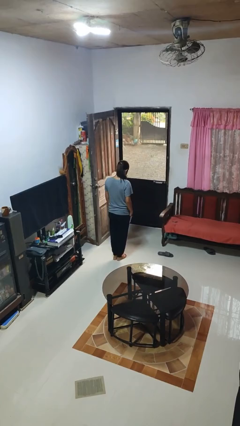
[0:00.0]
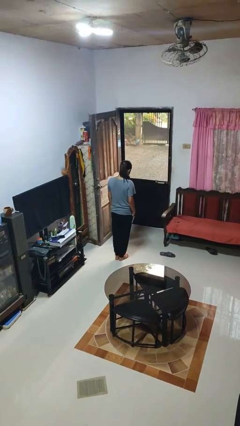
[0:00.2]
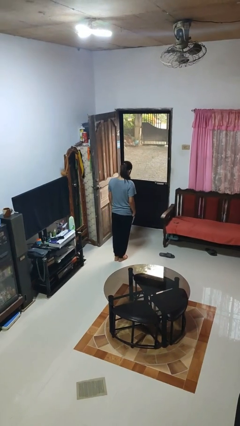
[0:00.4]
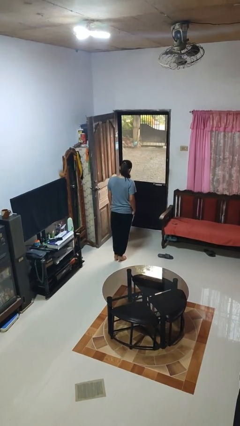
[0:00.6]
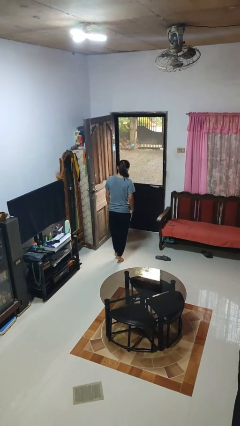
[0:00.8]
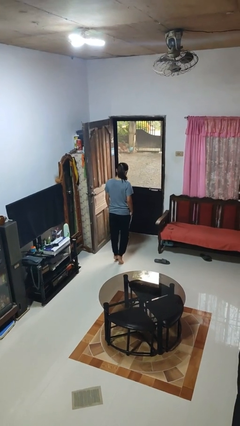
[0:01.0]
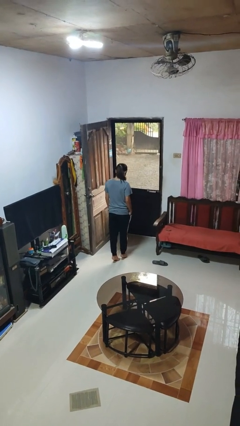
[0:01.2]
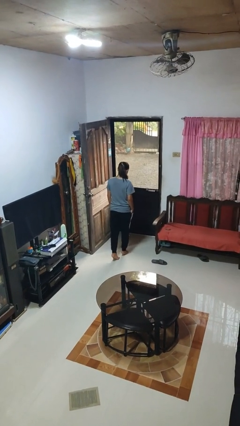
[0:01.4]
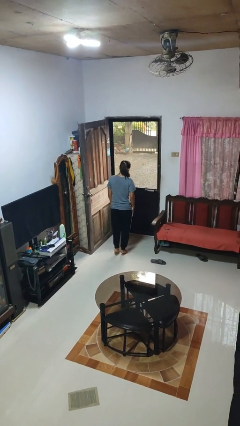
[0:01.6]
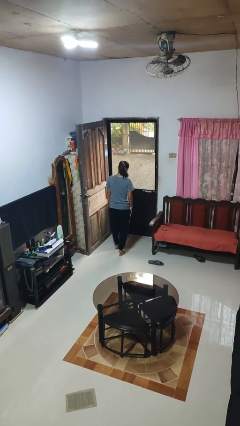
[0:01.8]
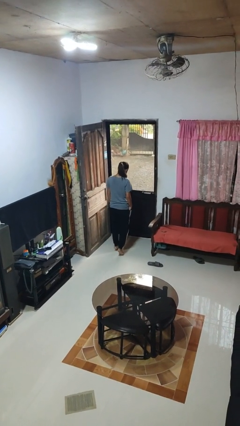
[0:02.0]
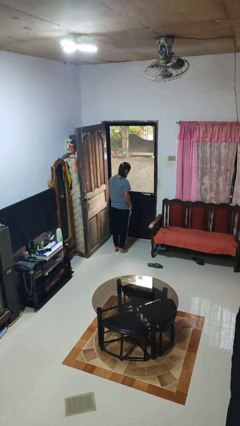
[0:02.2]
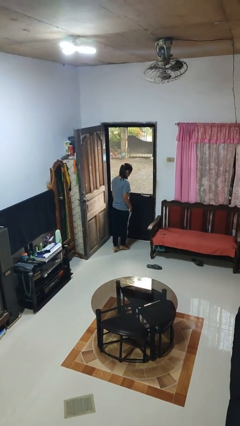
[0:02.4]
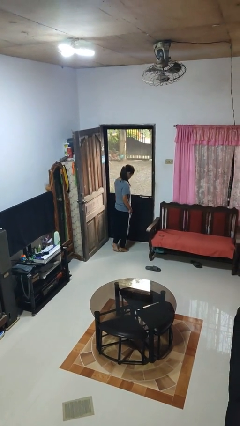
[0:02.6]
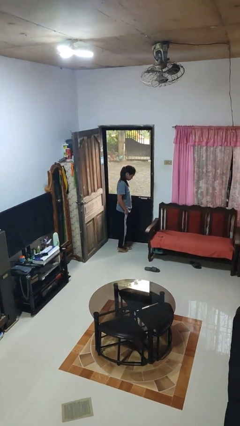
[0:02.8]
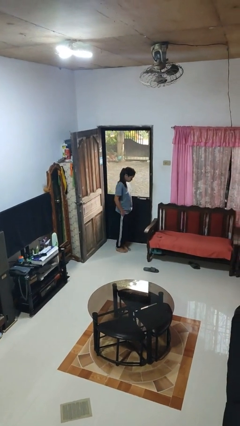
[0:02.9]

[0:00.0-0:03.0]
person walks tiptoe

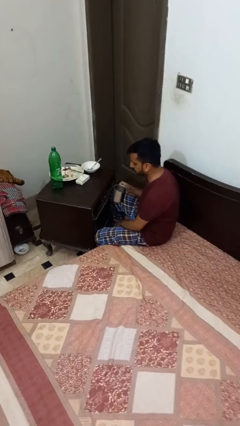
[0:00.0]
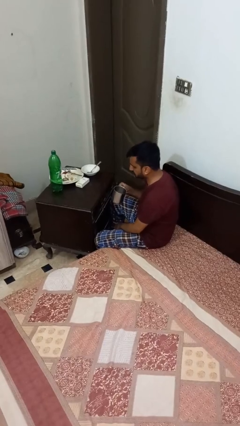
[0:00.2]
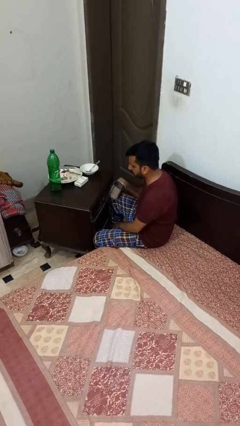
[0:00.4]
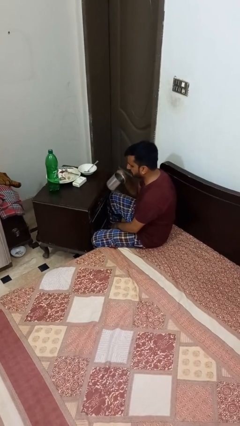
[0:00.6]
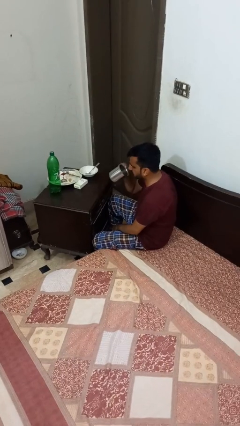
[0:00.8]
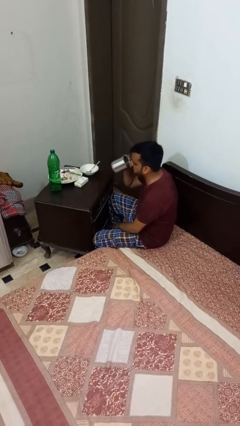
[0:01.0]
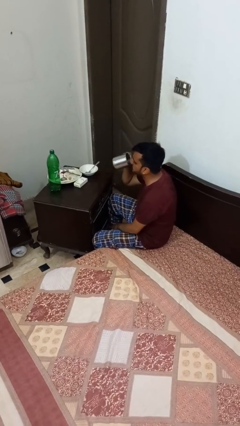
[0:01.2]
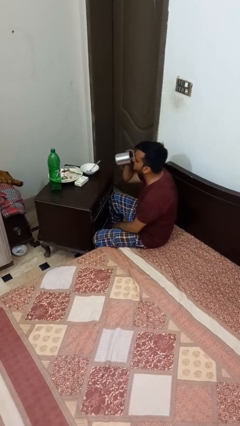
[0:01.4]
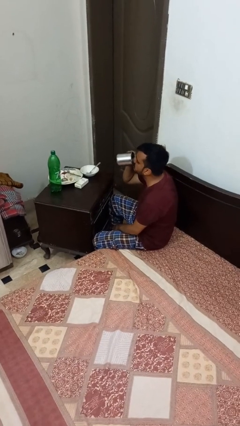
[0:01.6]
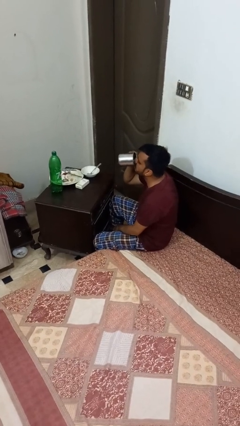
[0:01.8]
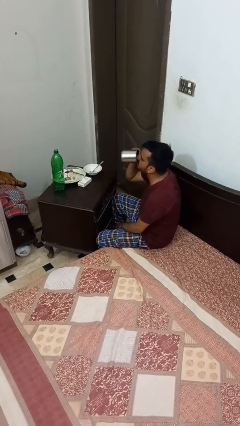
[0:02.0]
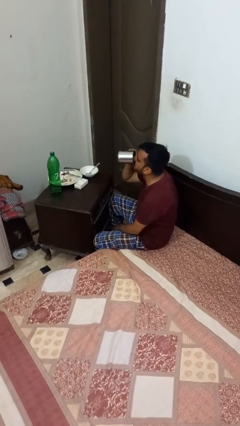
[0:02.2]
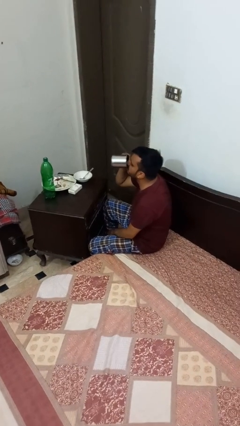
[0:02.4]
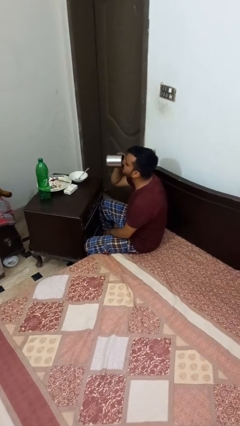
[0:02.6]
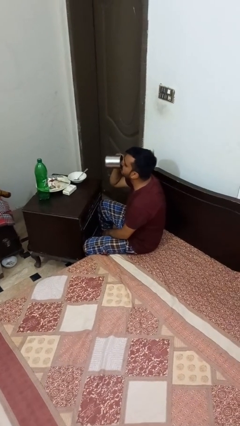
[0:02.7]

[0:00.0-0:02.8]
person drinks from mug

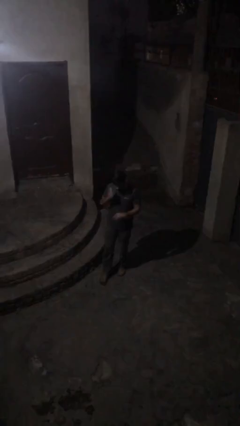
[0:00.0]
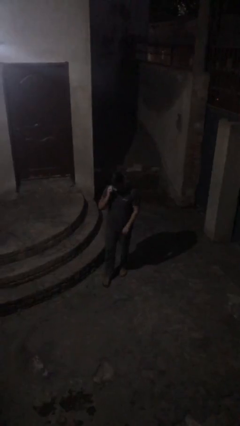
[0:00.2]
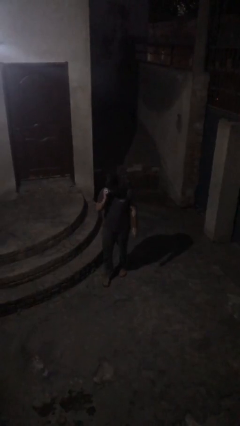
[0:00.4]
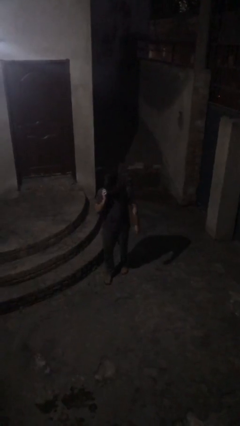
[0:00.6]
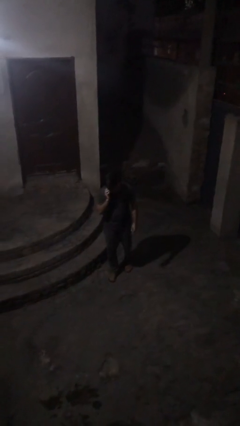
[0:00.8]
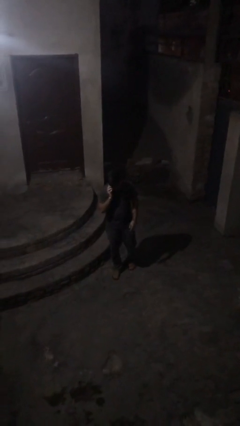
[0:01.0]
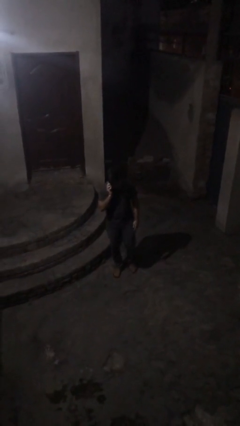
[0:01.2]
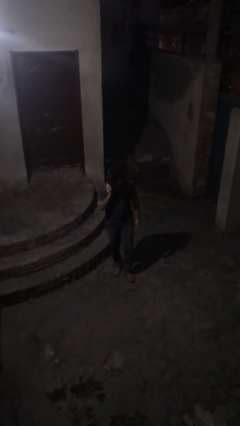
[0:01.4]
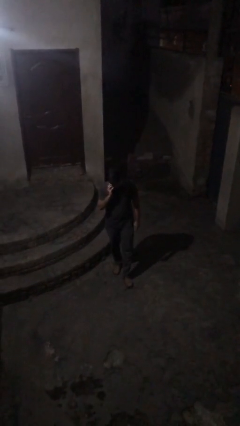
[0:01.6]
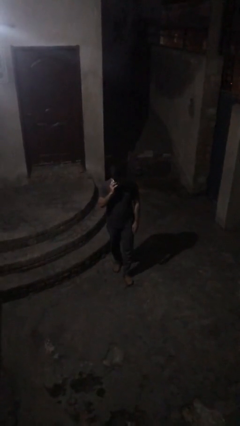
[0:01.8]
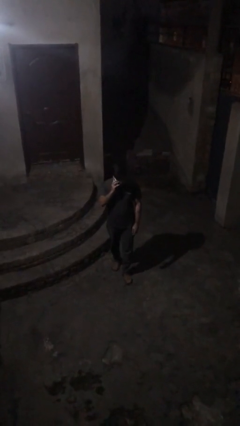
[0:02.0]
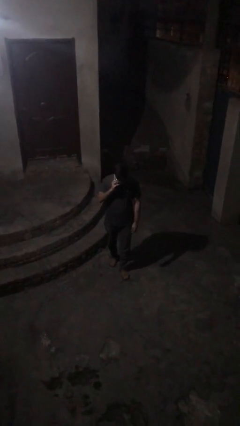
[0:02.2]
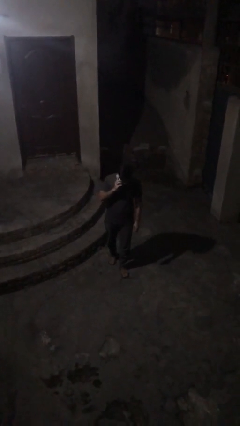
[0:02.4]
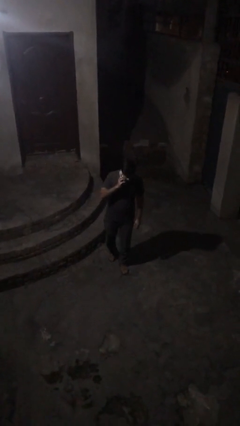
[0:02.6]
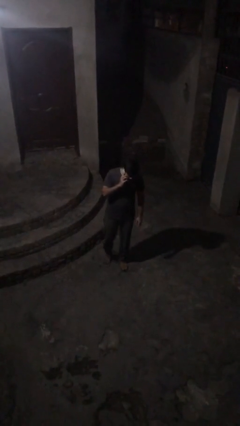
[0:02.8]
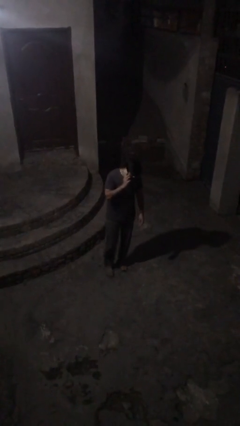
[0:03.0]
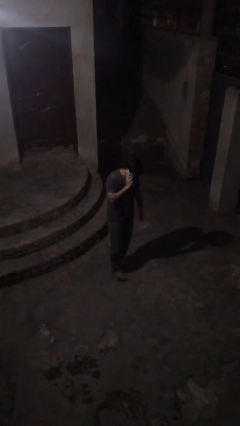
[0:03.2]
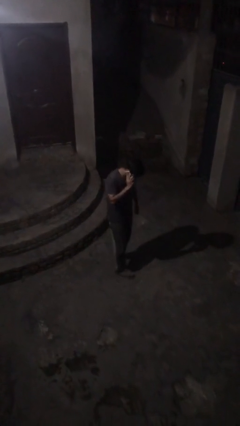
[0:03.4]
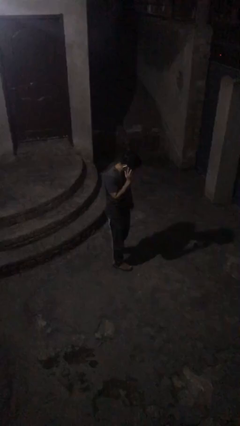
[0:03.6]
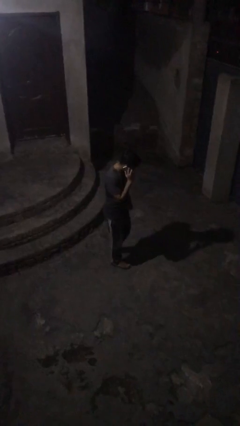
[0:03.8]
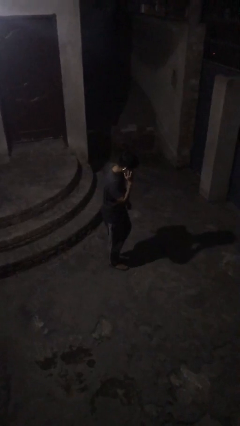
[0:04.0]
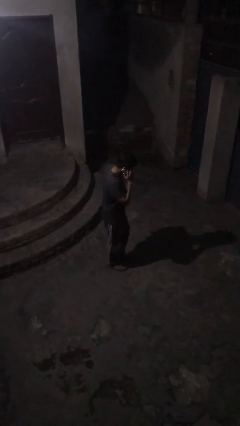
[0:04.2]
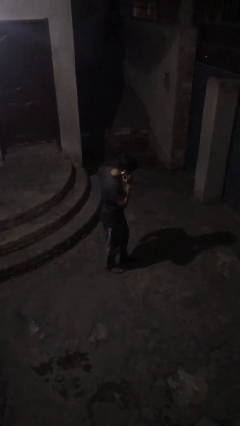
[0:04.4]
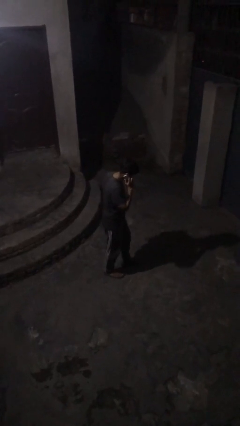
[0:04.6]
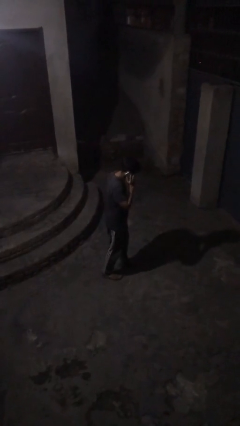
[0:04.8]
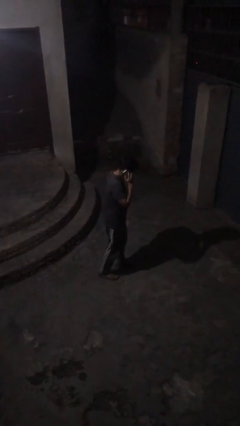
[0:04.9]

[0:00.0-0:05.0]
person talks on phone

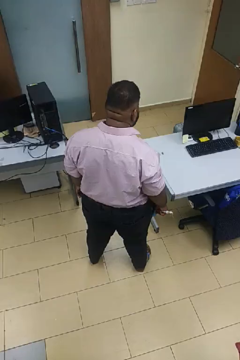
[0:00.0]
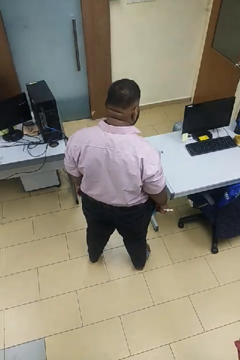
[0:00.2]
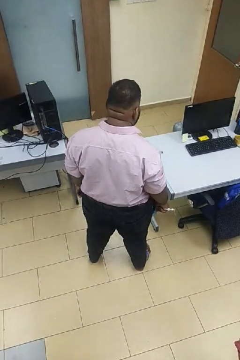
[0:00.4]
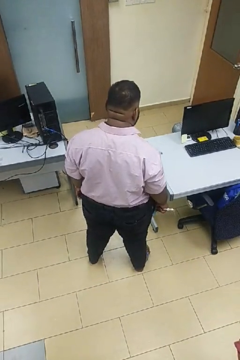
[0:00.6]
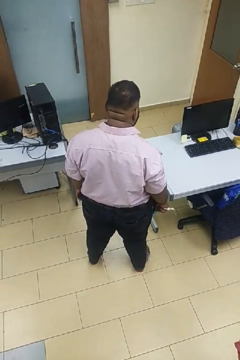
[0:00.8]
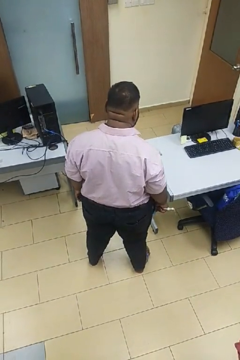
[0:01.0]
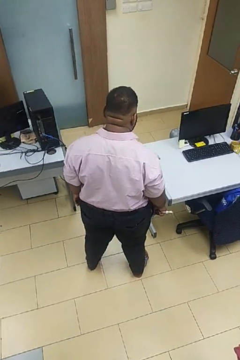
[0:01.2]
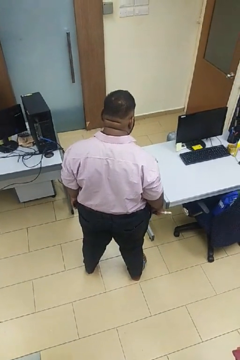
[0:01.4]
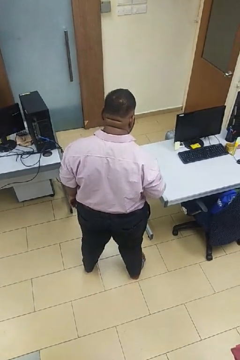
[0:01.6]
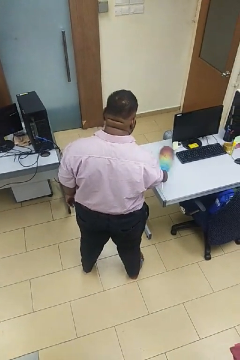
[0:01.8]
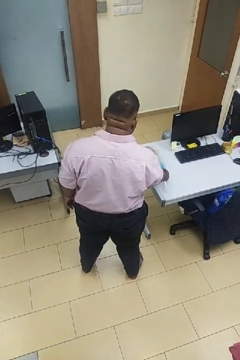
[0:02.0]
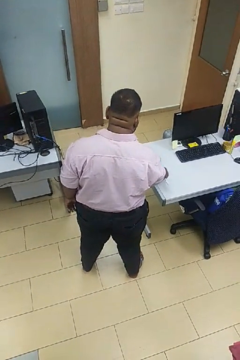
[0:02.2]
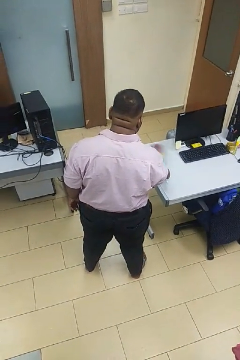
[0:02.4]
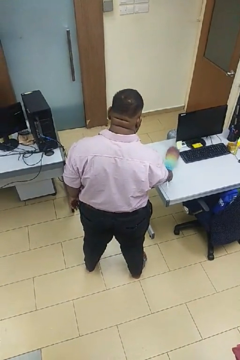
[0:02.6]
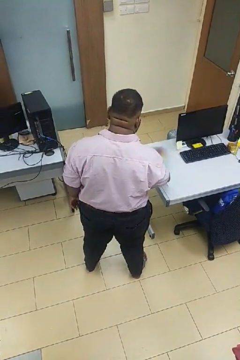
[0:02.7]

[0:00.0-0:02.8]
person dusts furniture

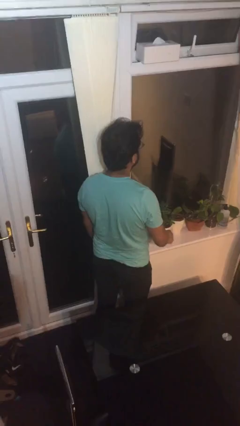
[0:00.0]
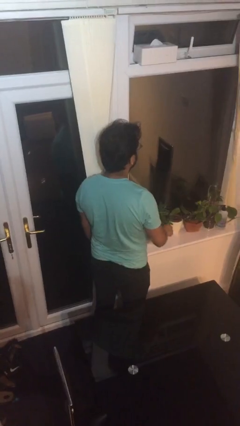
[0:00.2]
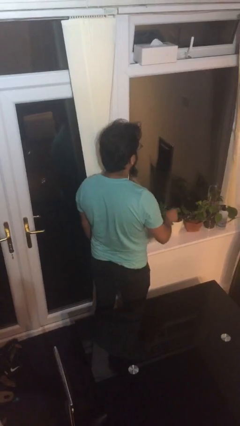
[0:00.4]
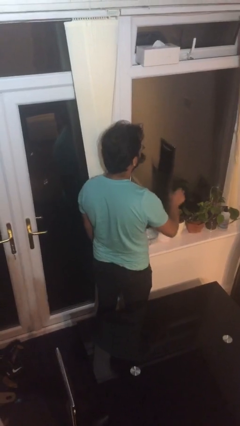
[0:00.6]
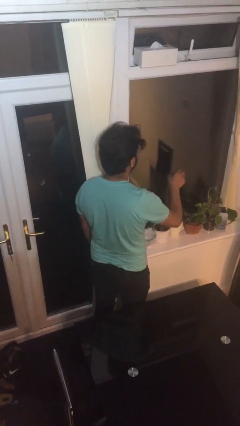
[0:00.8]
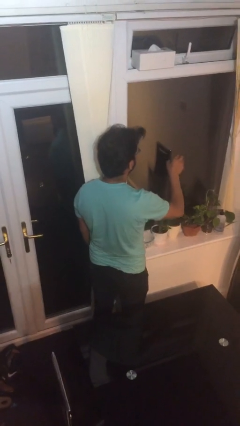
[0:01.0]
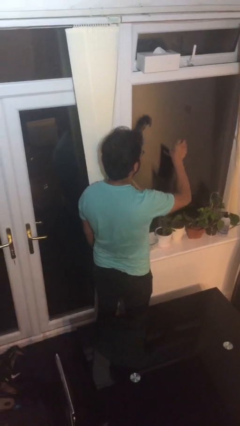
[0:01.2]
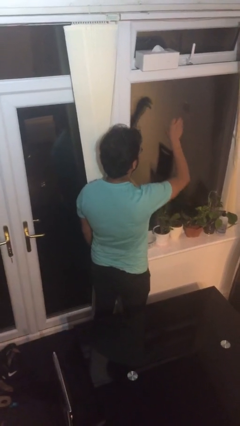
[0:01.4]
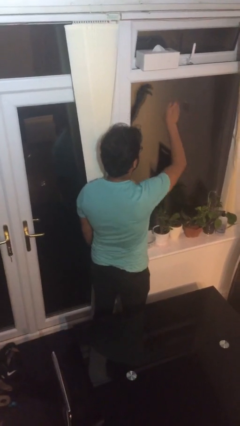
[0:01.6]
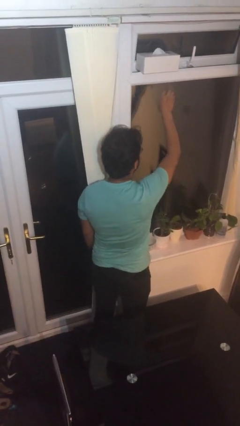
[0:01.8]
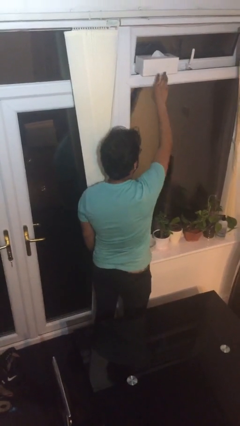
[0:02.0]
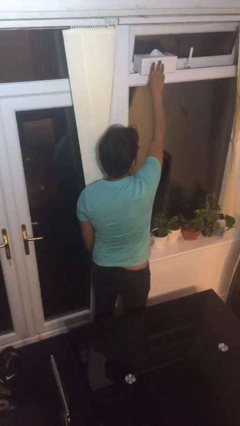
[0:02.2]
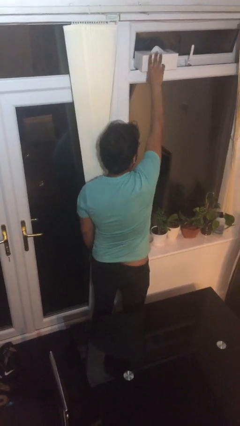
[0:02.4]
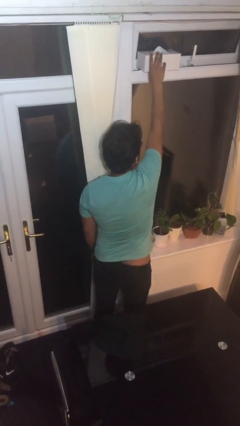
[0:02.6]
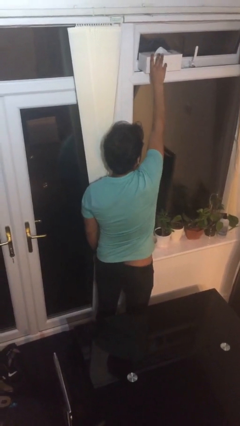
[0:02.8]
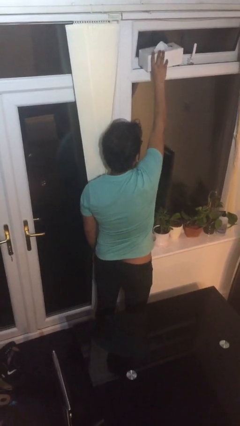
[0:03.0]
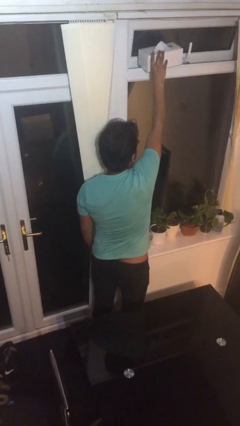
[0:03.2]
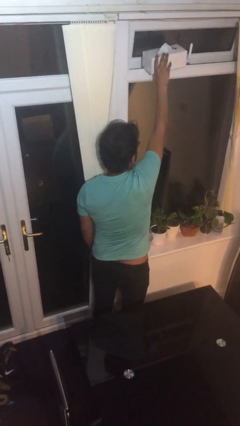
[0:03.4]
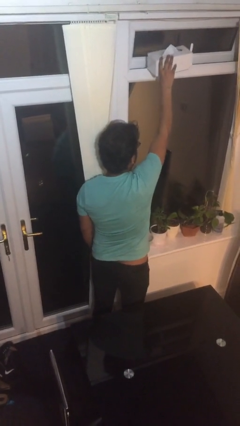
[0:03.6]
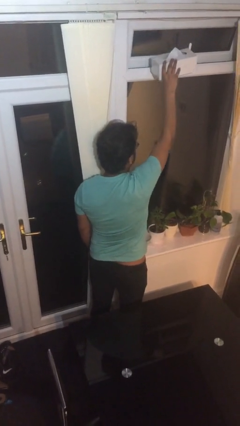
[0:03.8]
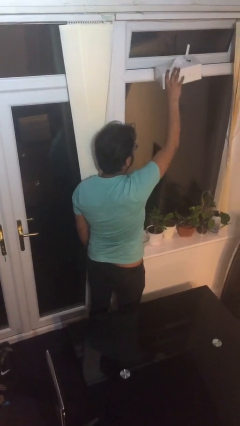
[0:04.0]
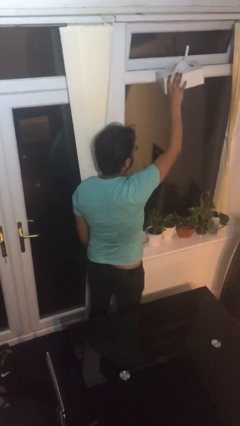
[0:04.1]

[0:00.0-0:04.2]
person picks up object from shelf

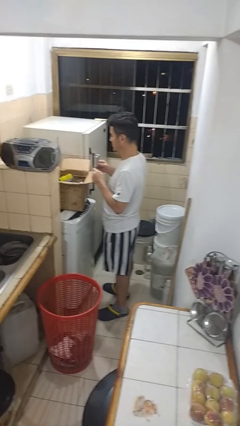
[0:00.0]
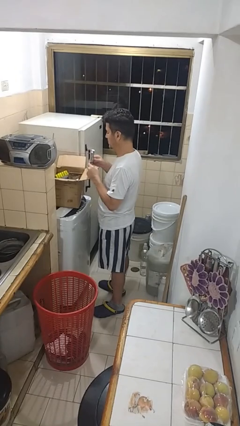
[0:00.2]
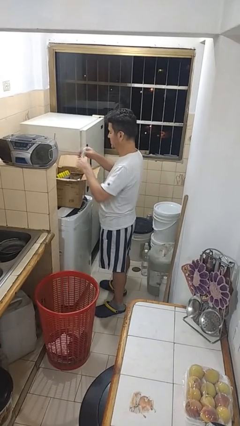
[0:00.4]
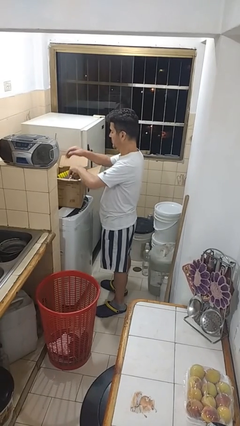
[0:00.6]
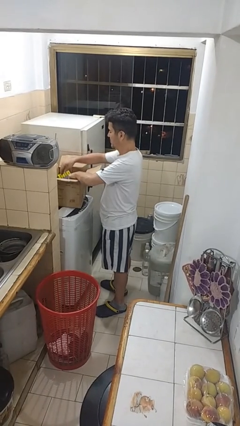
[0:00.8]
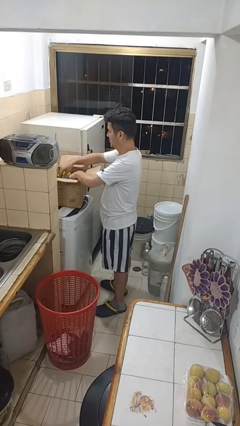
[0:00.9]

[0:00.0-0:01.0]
person puts object into box
